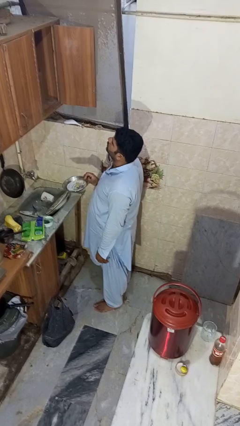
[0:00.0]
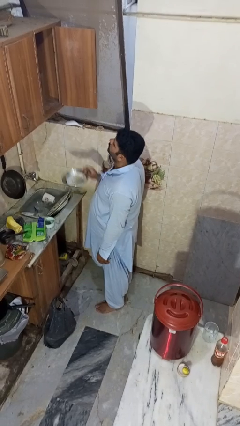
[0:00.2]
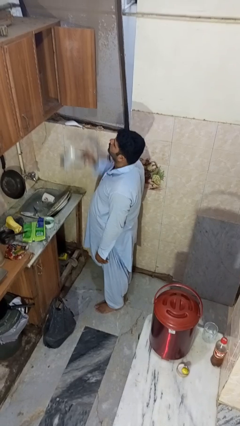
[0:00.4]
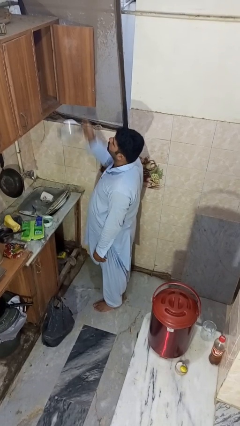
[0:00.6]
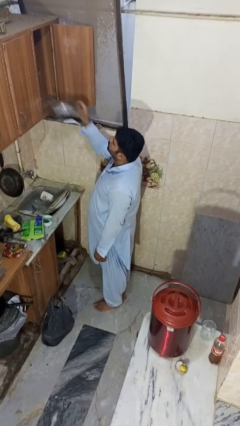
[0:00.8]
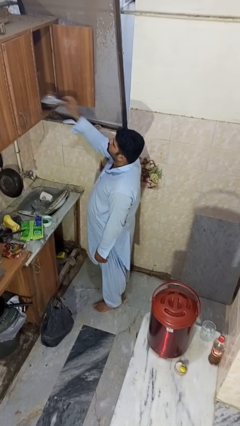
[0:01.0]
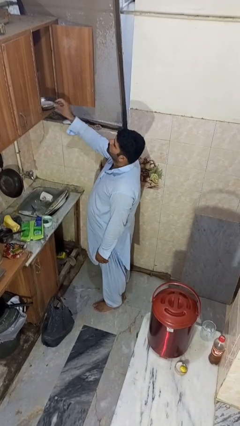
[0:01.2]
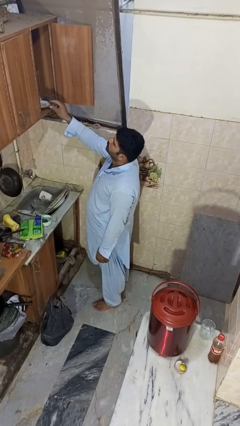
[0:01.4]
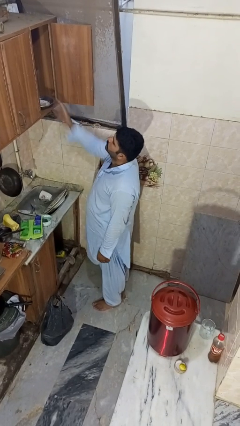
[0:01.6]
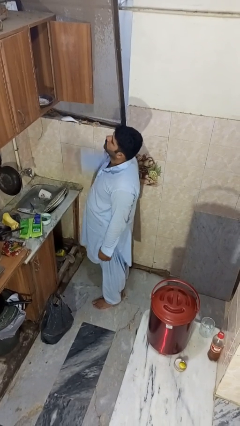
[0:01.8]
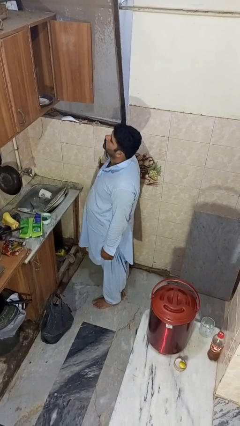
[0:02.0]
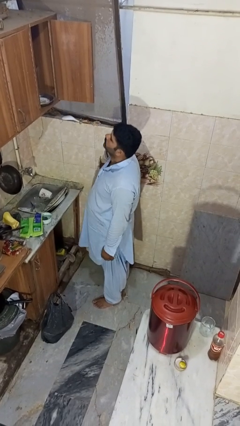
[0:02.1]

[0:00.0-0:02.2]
person puts object in cabinet

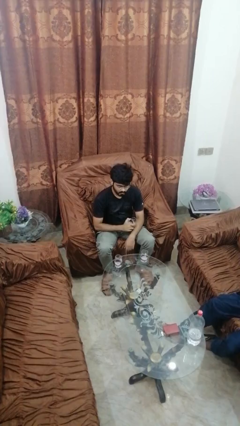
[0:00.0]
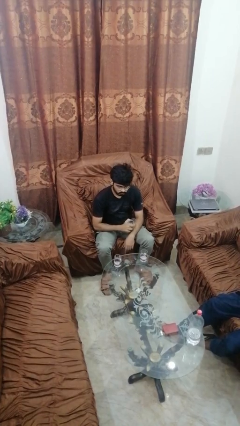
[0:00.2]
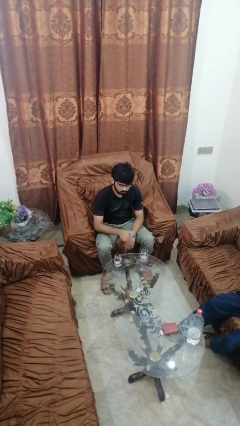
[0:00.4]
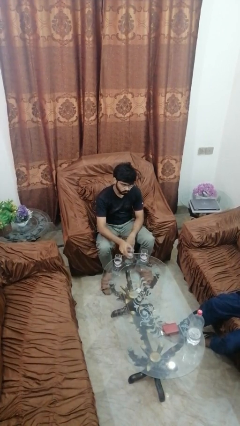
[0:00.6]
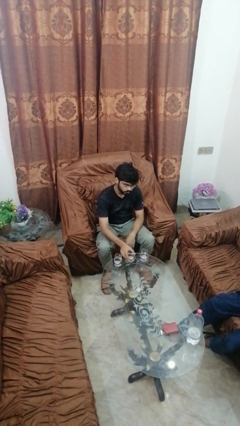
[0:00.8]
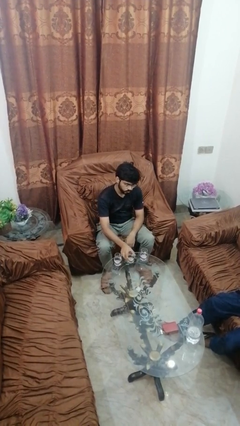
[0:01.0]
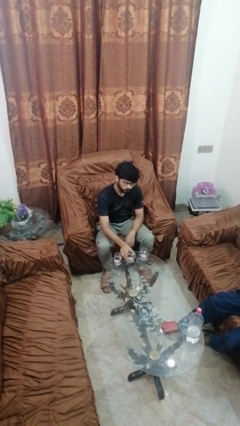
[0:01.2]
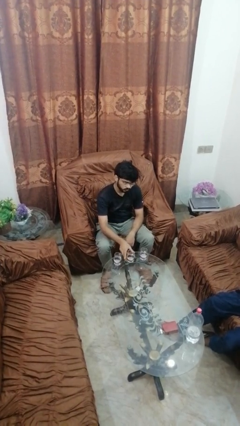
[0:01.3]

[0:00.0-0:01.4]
person puts down object on table

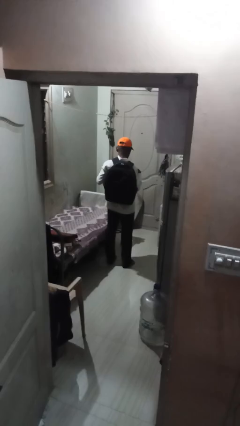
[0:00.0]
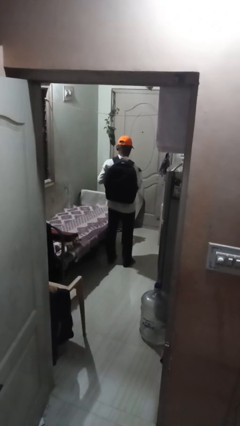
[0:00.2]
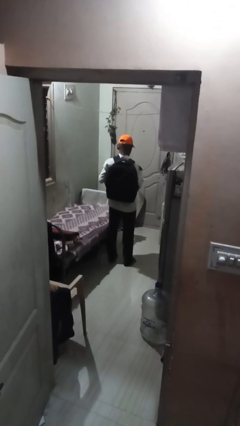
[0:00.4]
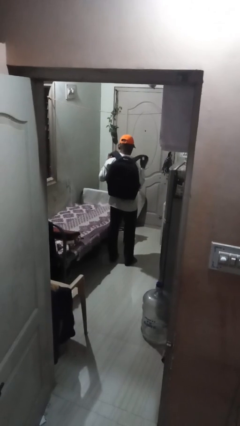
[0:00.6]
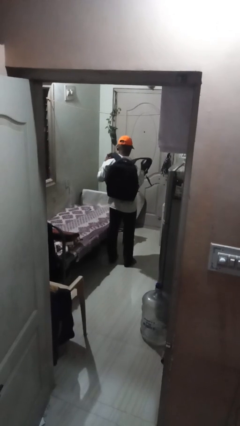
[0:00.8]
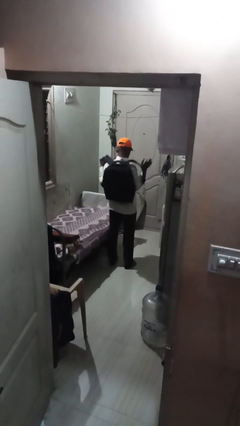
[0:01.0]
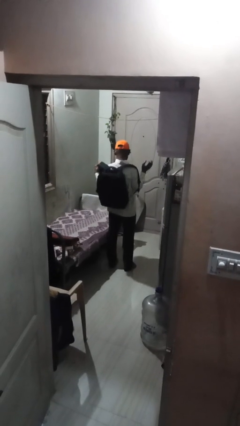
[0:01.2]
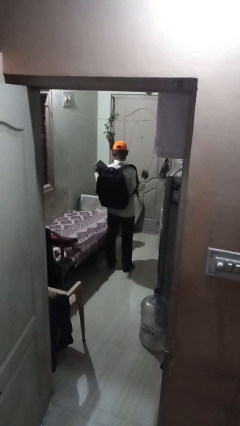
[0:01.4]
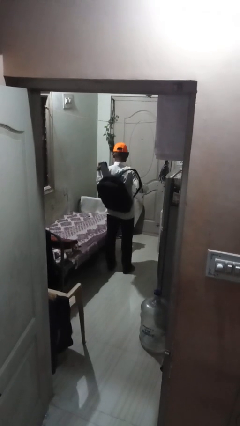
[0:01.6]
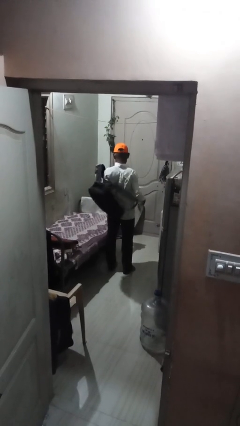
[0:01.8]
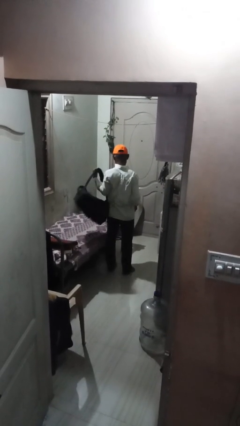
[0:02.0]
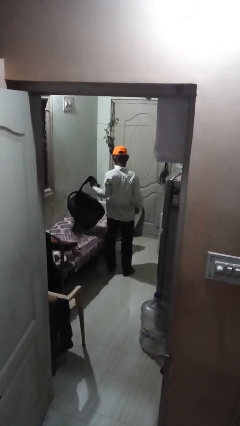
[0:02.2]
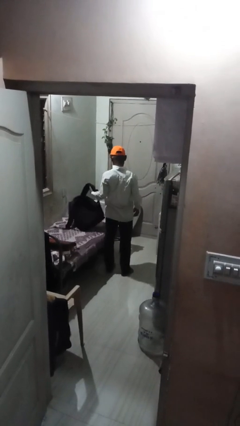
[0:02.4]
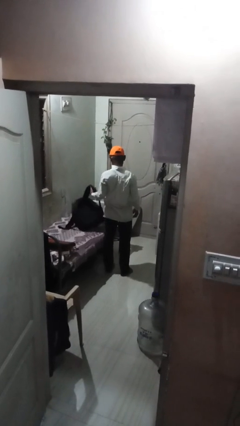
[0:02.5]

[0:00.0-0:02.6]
person takes off backpack

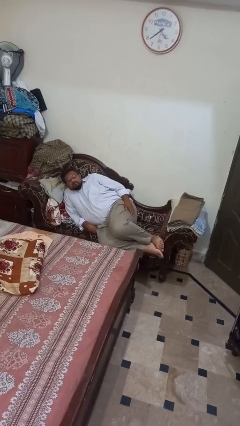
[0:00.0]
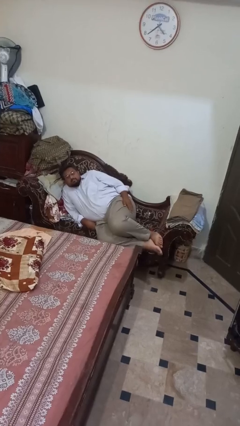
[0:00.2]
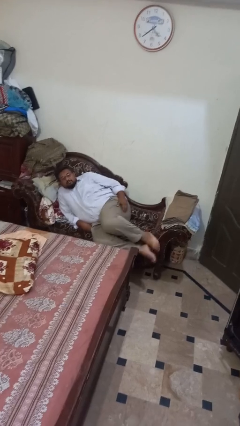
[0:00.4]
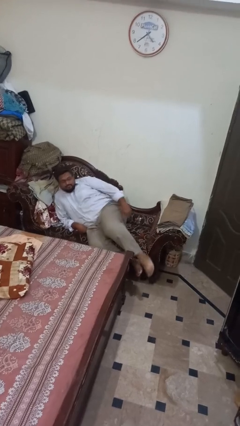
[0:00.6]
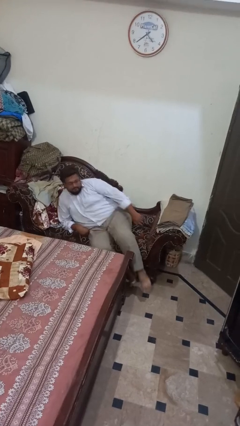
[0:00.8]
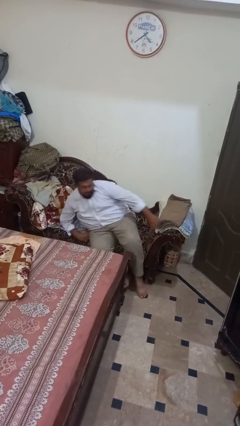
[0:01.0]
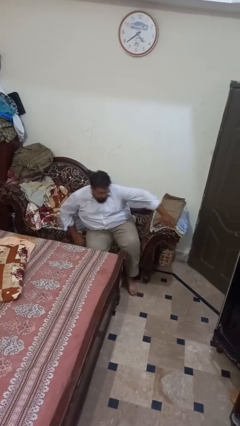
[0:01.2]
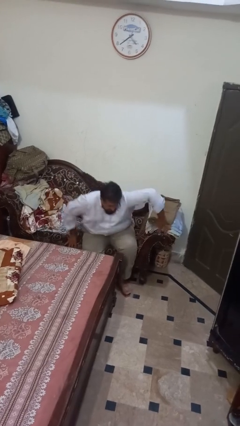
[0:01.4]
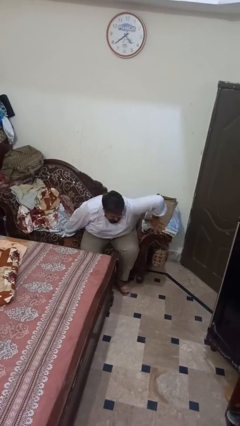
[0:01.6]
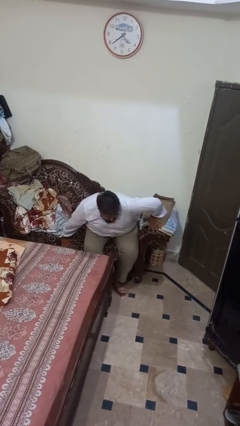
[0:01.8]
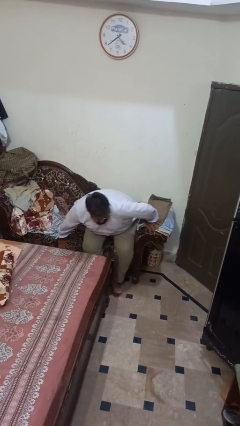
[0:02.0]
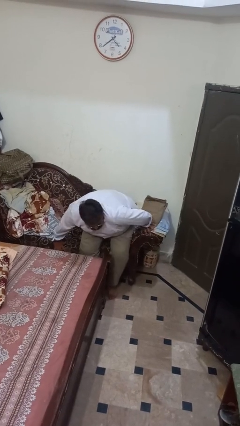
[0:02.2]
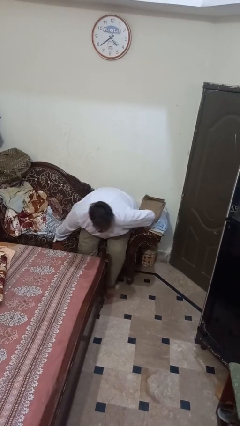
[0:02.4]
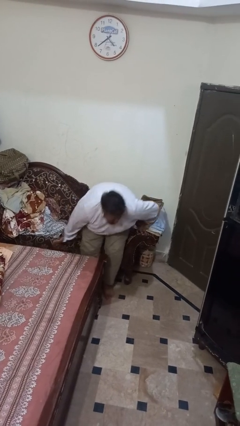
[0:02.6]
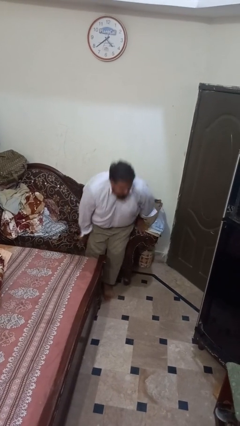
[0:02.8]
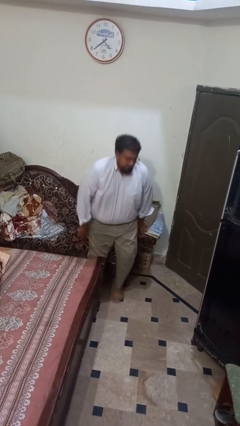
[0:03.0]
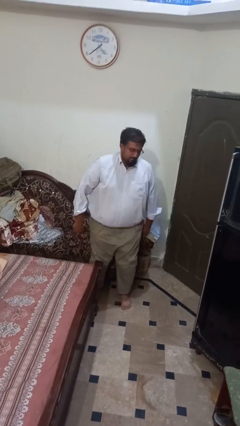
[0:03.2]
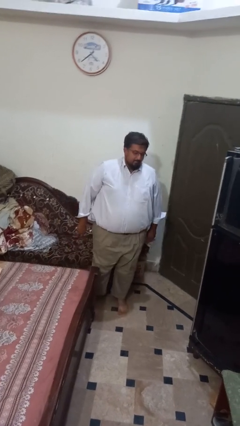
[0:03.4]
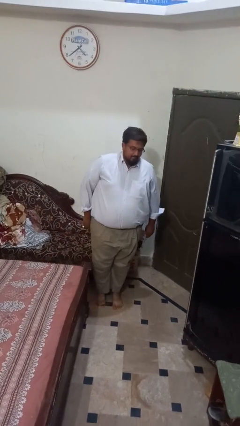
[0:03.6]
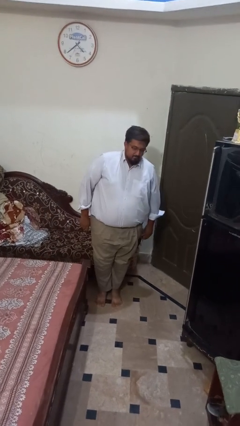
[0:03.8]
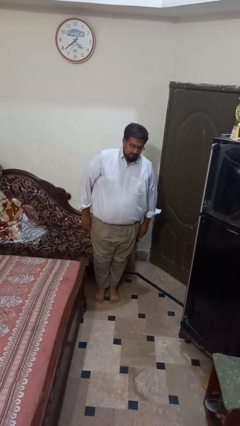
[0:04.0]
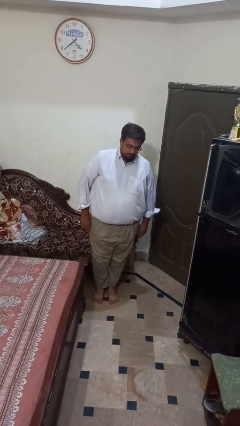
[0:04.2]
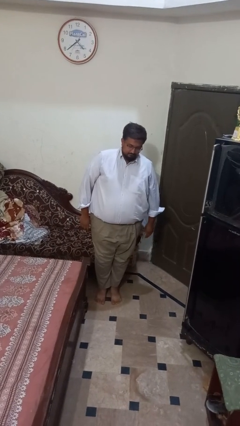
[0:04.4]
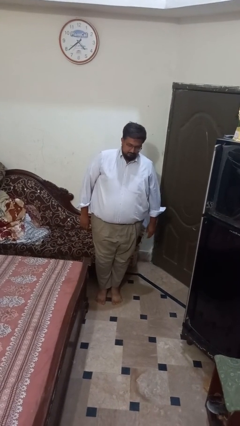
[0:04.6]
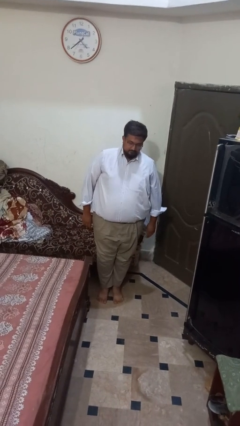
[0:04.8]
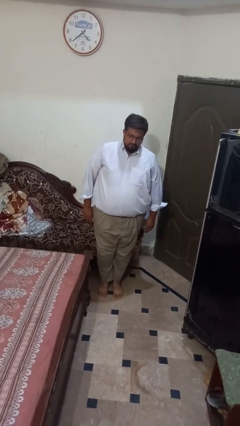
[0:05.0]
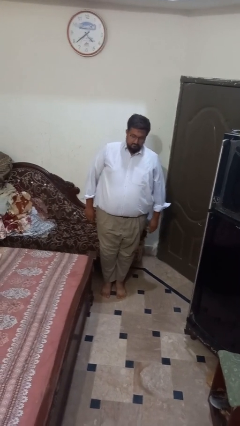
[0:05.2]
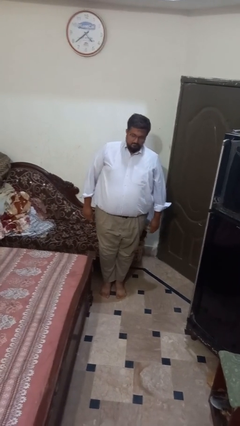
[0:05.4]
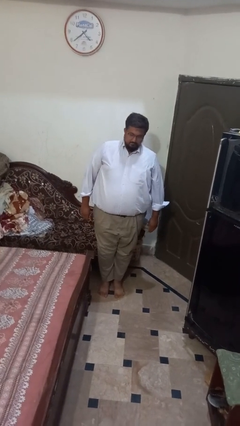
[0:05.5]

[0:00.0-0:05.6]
person stands up

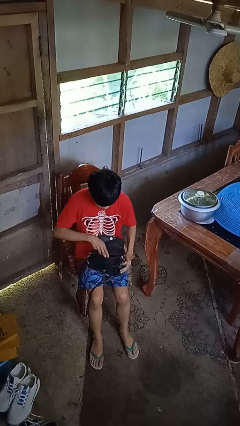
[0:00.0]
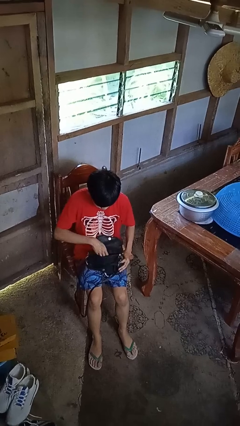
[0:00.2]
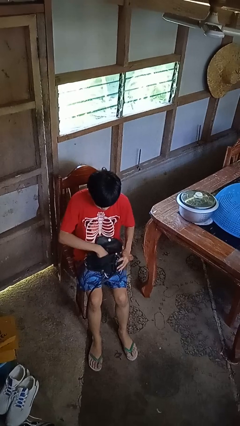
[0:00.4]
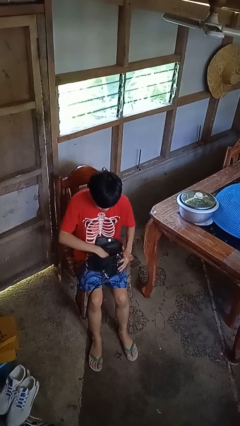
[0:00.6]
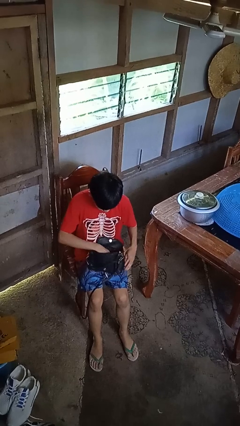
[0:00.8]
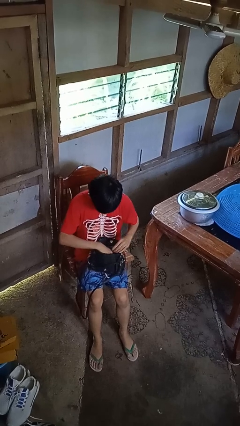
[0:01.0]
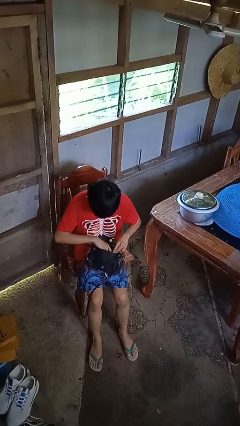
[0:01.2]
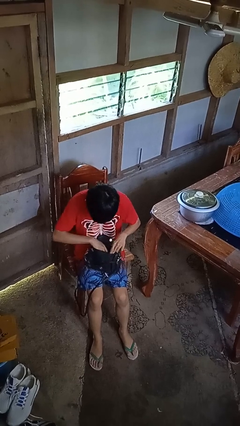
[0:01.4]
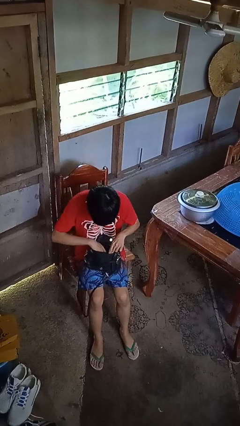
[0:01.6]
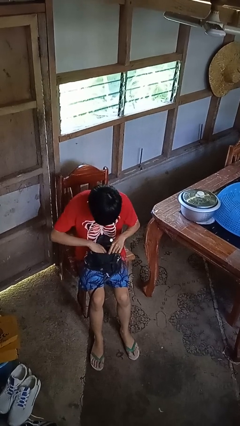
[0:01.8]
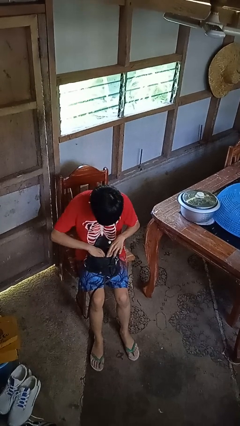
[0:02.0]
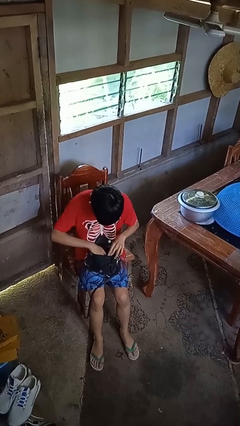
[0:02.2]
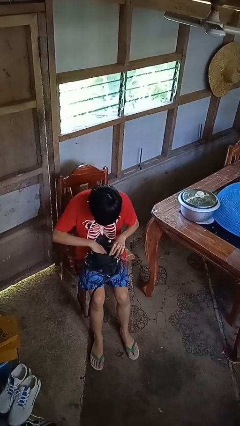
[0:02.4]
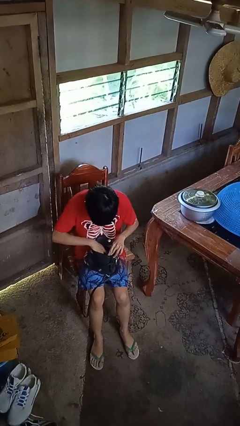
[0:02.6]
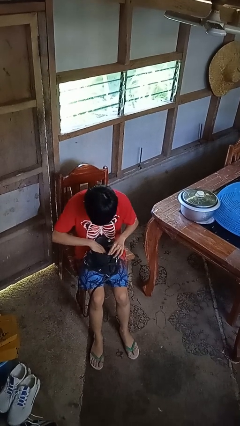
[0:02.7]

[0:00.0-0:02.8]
person searches in purse

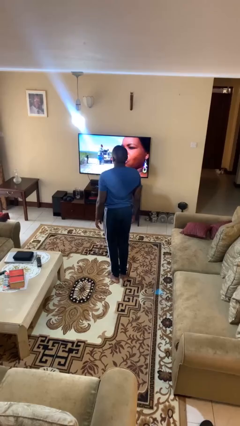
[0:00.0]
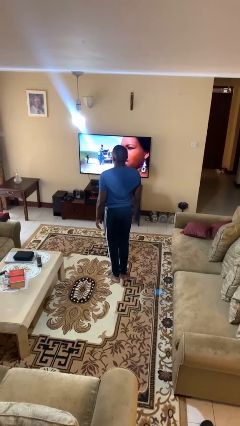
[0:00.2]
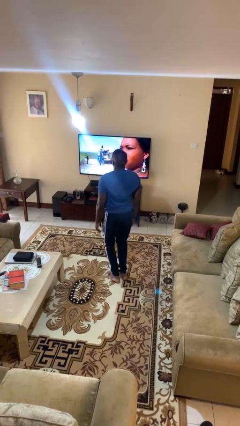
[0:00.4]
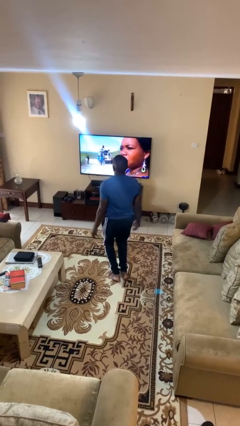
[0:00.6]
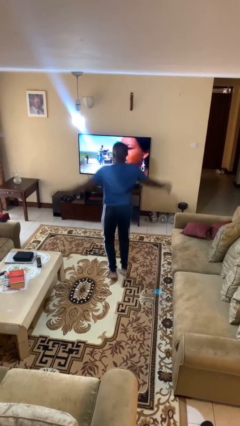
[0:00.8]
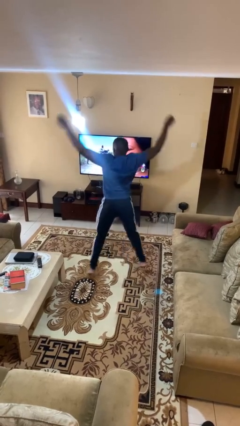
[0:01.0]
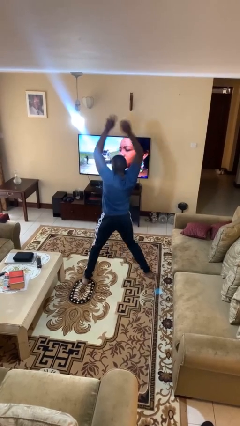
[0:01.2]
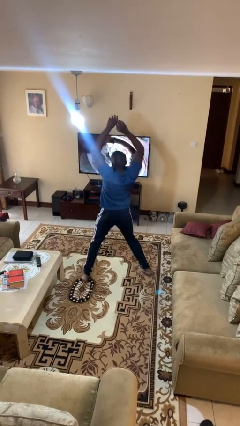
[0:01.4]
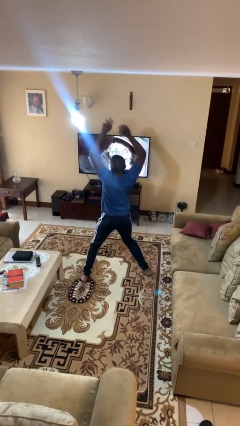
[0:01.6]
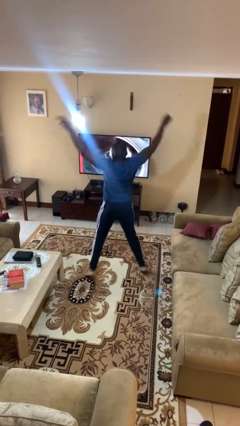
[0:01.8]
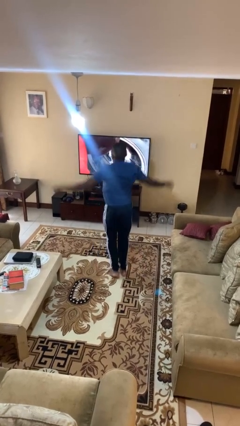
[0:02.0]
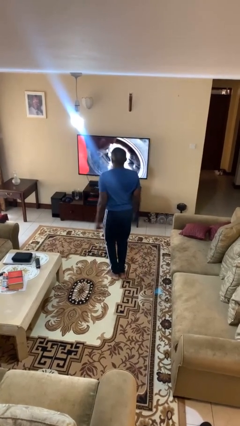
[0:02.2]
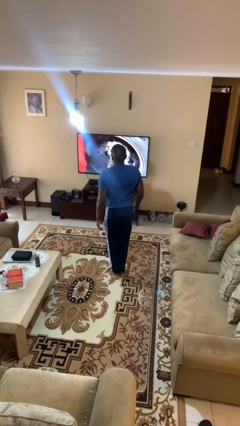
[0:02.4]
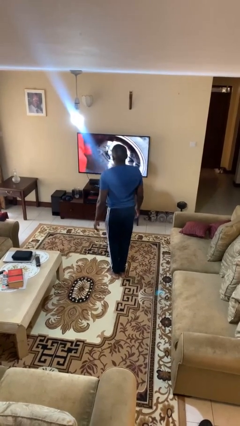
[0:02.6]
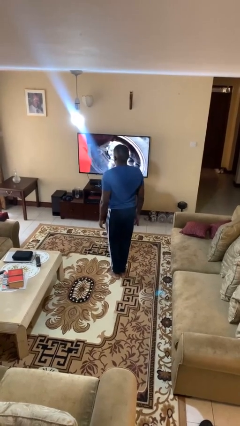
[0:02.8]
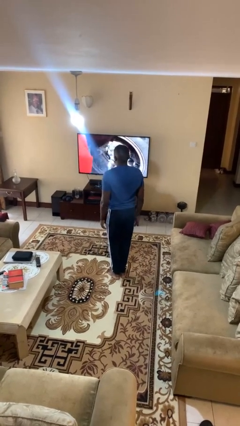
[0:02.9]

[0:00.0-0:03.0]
person exercises with jumping jacks

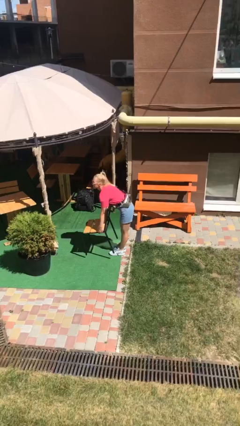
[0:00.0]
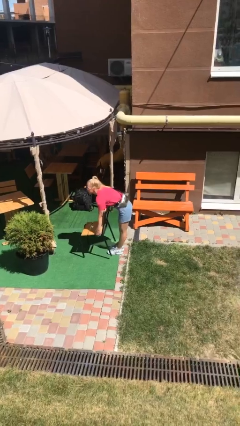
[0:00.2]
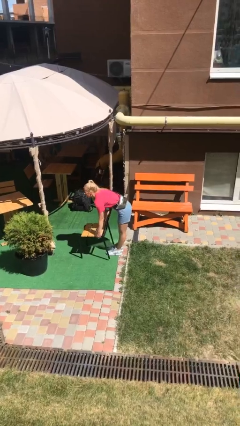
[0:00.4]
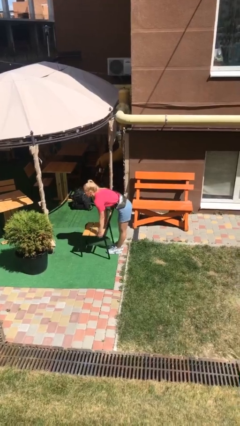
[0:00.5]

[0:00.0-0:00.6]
person puts down object on floor
